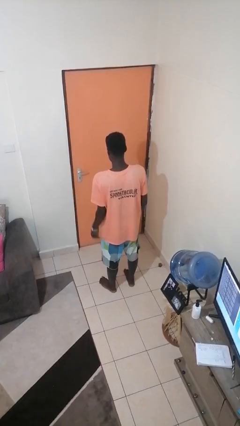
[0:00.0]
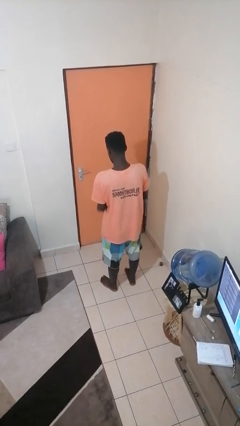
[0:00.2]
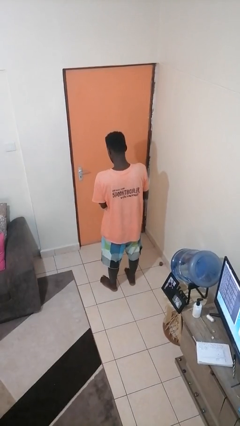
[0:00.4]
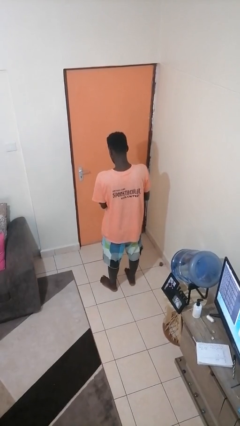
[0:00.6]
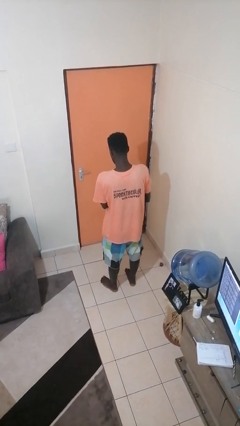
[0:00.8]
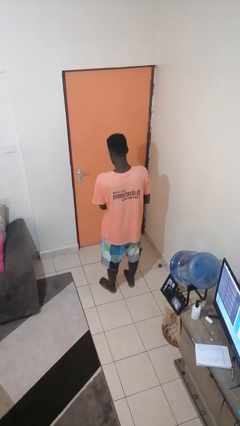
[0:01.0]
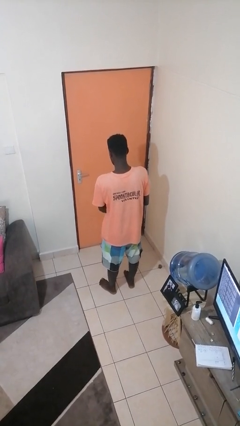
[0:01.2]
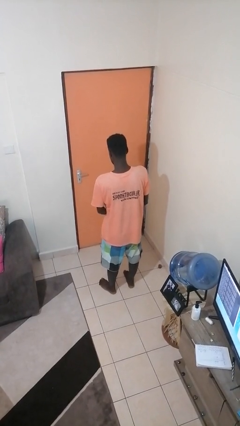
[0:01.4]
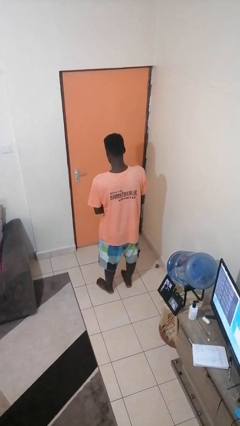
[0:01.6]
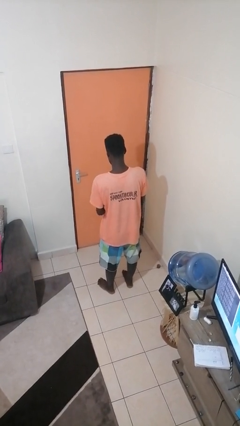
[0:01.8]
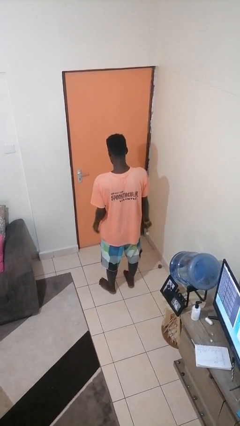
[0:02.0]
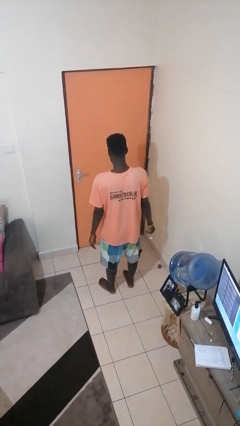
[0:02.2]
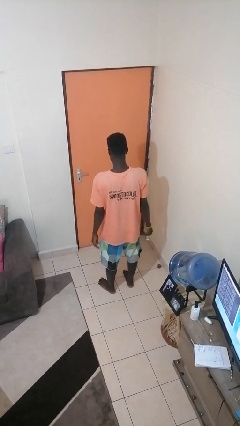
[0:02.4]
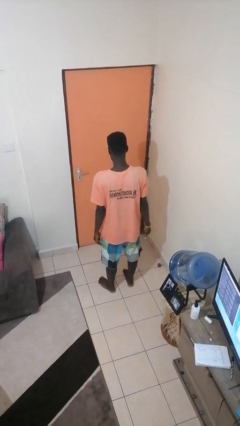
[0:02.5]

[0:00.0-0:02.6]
person takes off wristwatch

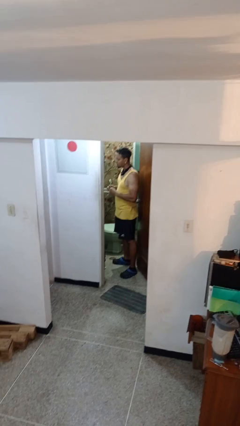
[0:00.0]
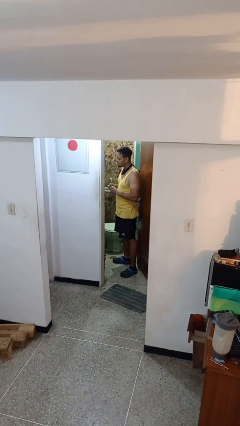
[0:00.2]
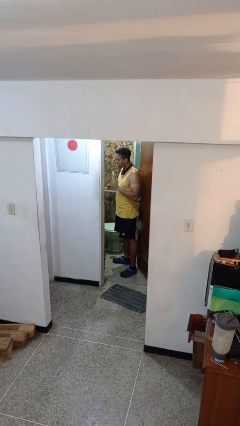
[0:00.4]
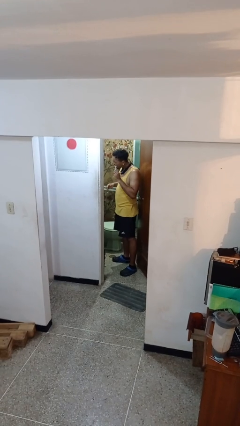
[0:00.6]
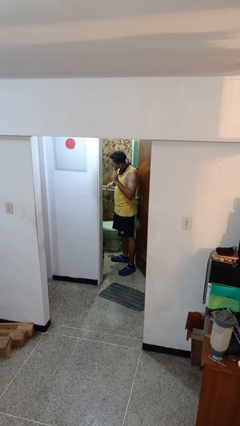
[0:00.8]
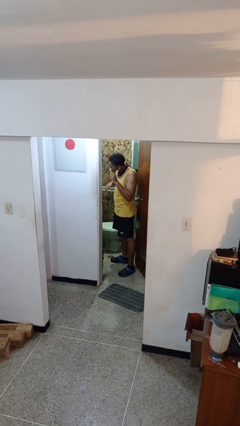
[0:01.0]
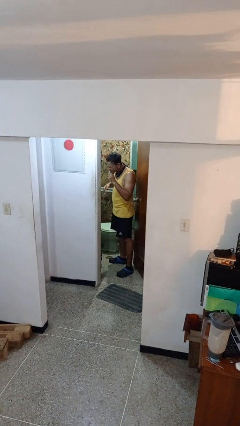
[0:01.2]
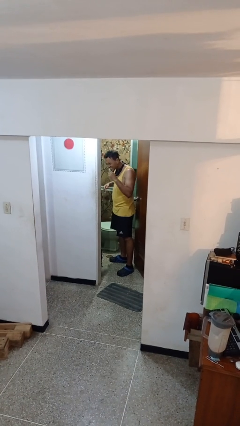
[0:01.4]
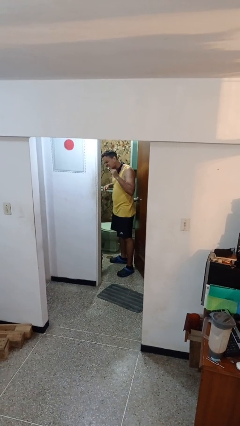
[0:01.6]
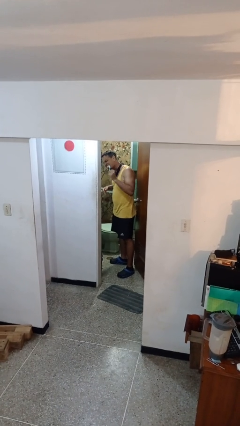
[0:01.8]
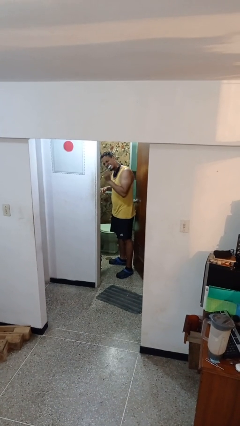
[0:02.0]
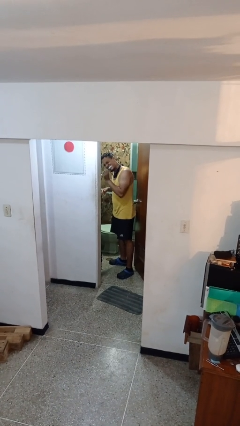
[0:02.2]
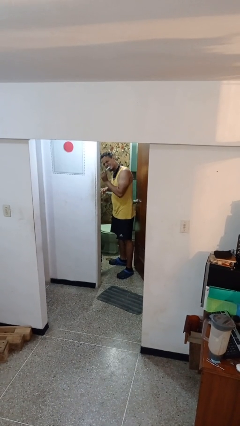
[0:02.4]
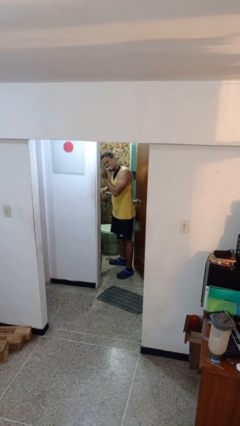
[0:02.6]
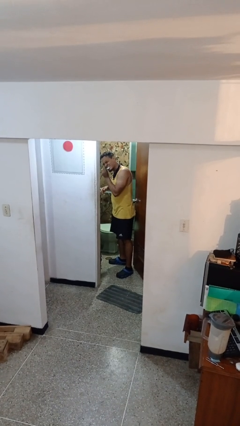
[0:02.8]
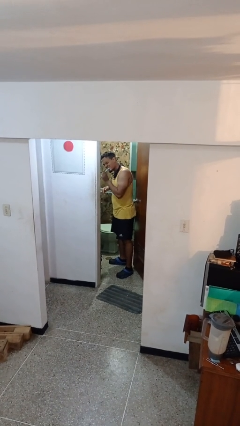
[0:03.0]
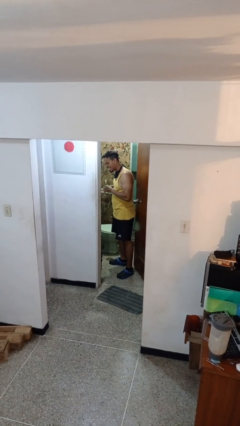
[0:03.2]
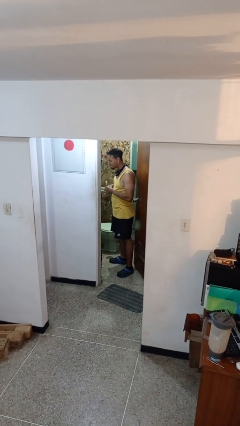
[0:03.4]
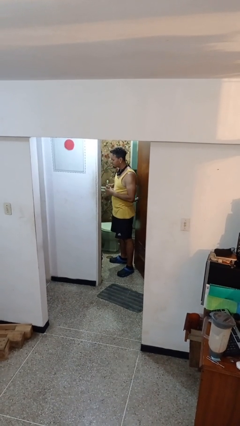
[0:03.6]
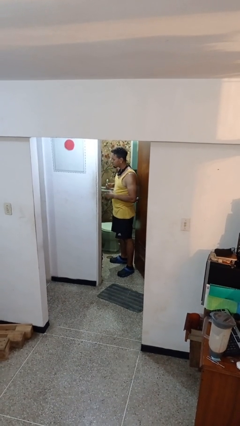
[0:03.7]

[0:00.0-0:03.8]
person brushes teeth

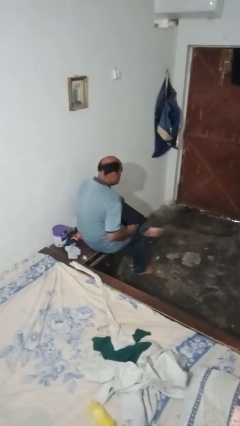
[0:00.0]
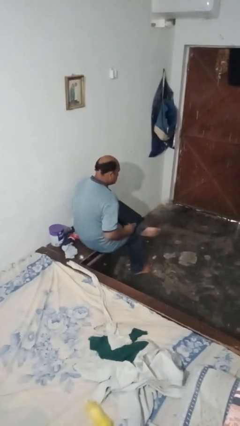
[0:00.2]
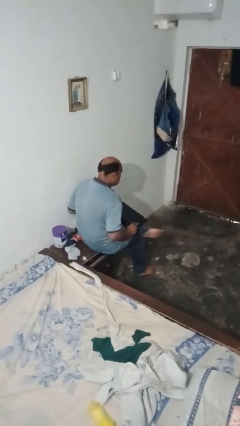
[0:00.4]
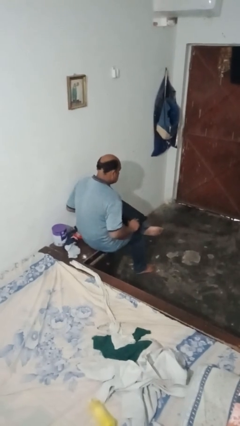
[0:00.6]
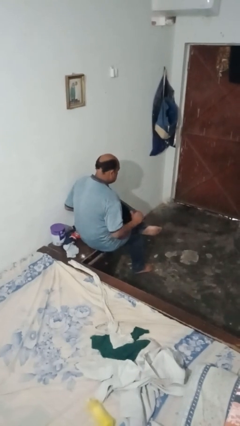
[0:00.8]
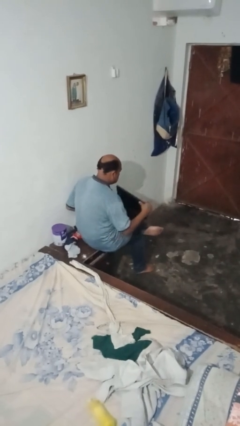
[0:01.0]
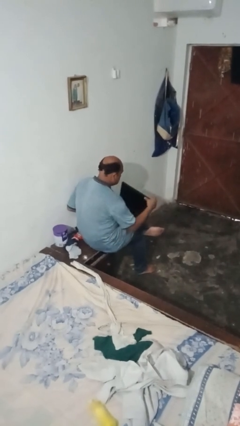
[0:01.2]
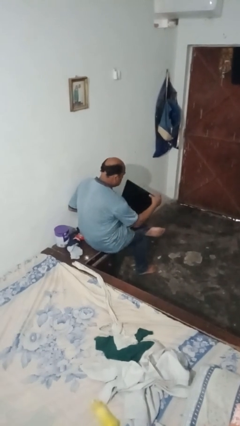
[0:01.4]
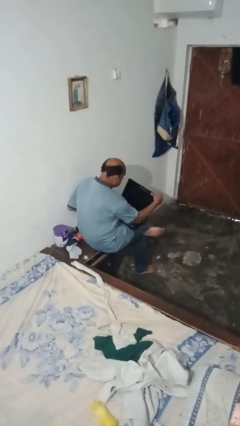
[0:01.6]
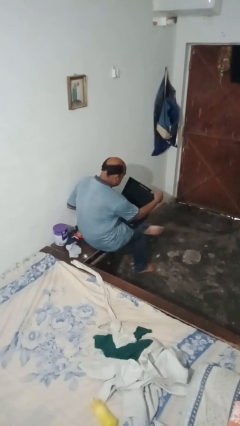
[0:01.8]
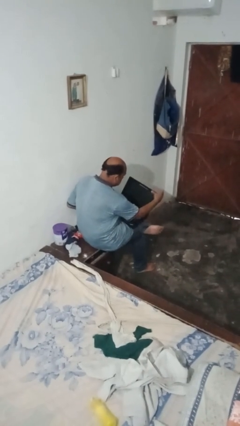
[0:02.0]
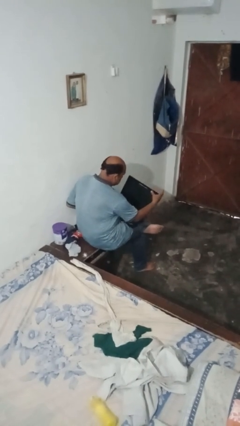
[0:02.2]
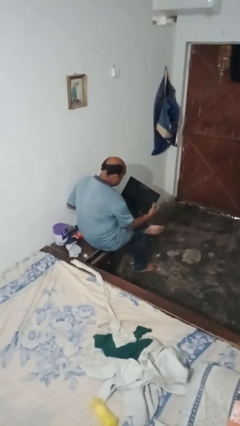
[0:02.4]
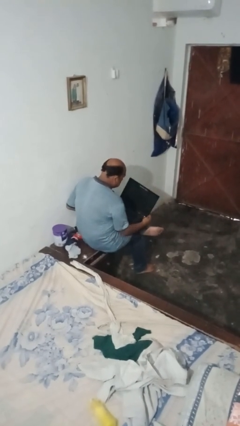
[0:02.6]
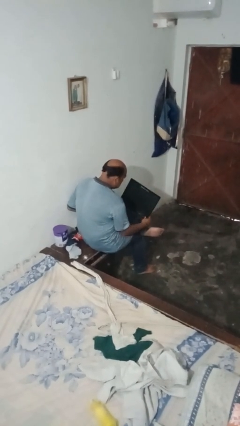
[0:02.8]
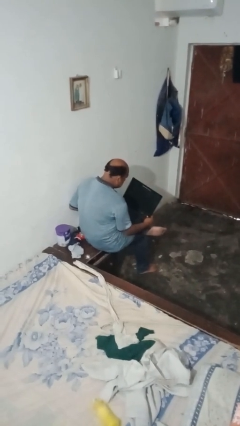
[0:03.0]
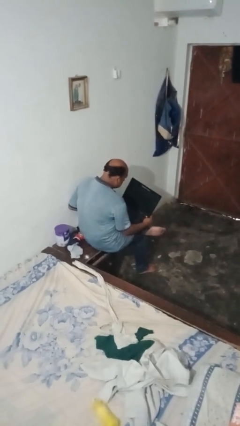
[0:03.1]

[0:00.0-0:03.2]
person opens laptop

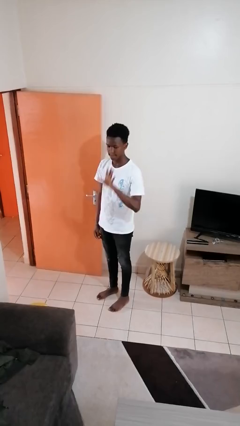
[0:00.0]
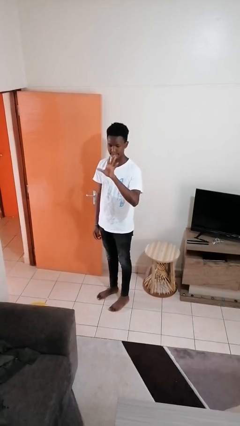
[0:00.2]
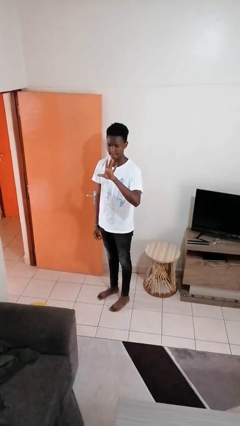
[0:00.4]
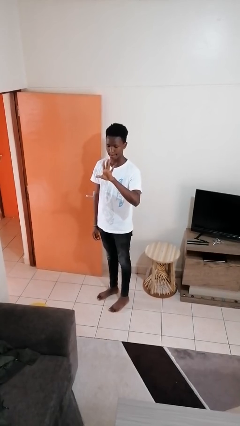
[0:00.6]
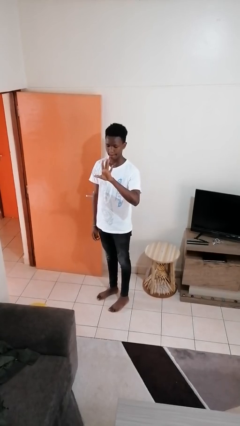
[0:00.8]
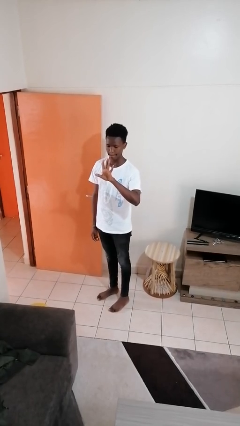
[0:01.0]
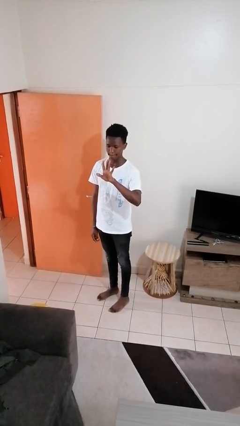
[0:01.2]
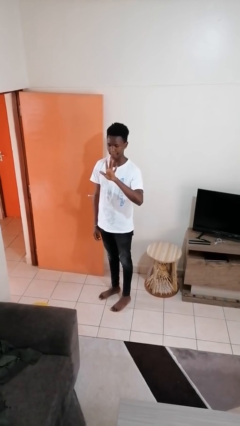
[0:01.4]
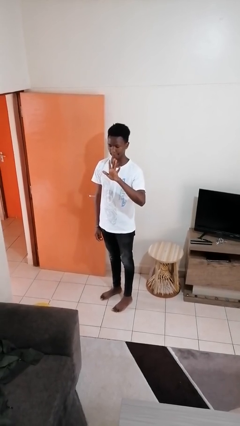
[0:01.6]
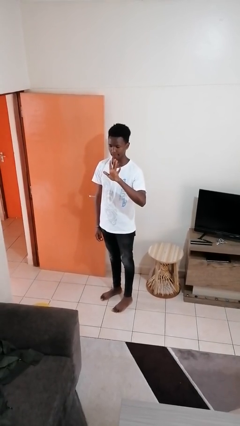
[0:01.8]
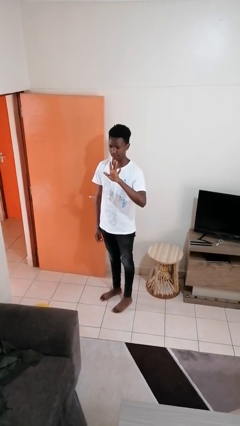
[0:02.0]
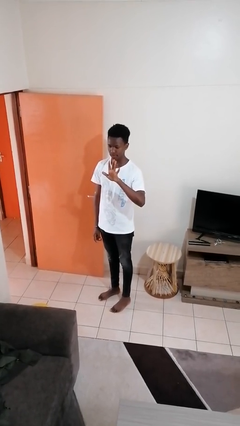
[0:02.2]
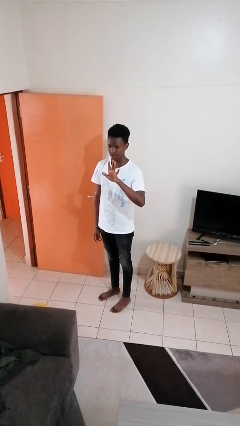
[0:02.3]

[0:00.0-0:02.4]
person gestures number five

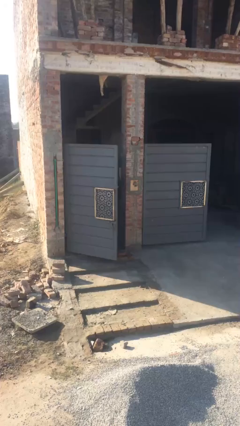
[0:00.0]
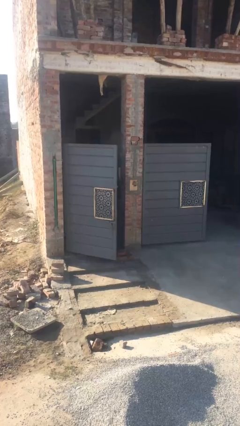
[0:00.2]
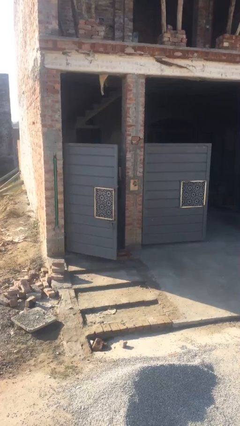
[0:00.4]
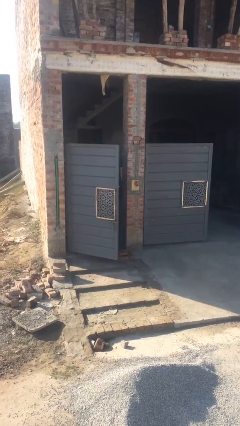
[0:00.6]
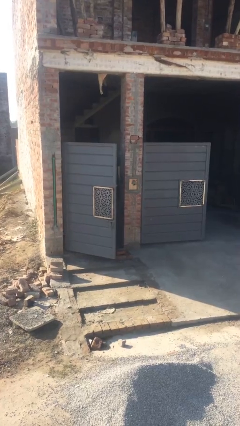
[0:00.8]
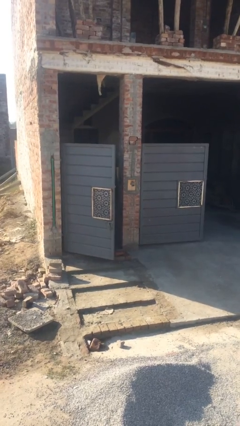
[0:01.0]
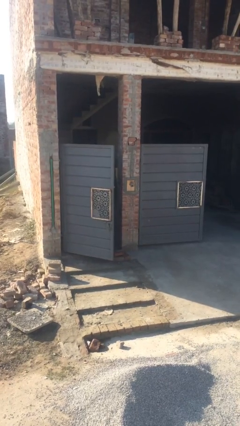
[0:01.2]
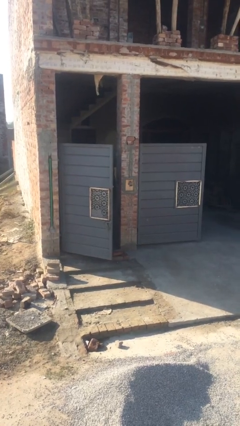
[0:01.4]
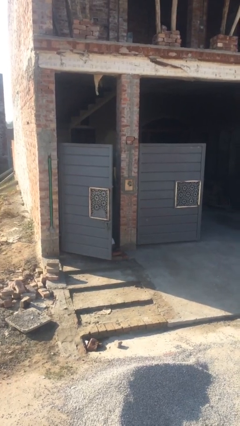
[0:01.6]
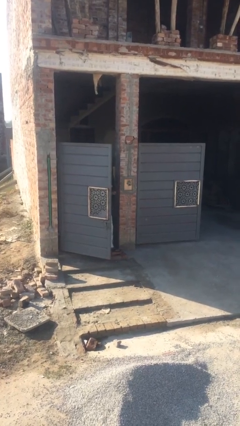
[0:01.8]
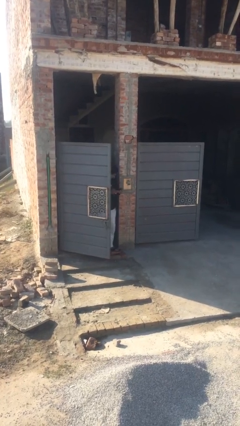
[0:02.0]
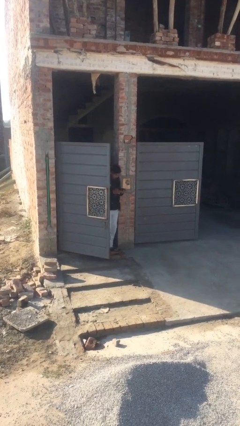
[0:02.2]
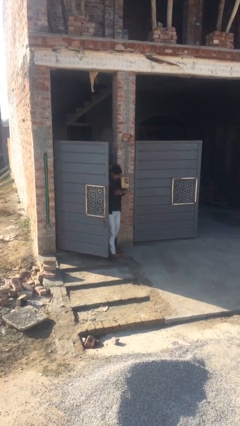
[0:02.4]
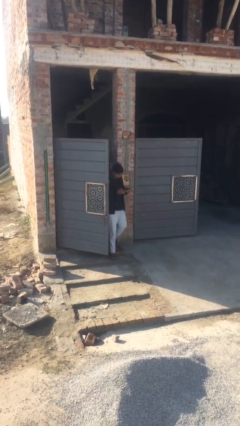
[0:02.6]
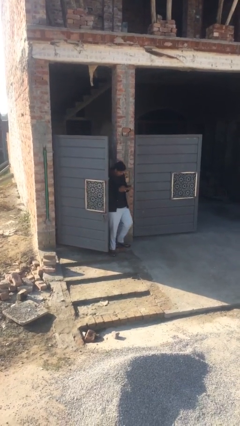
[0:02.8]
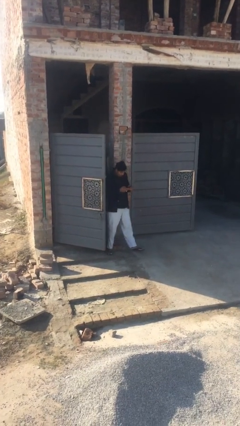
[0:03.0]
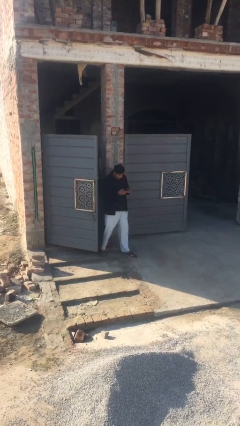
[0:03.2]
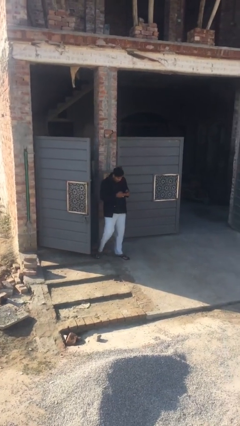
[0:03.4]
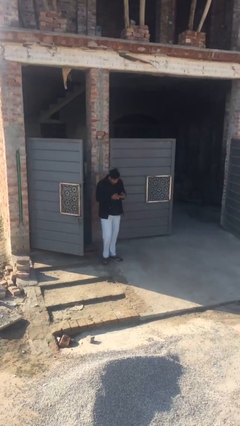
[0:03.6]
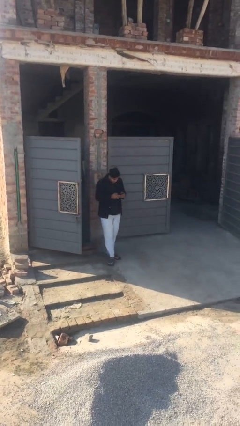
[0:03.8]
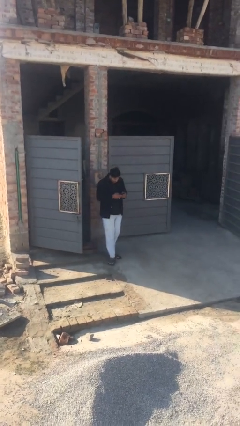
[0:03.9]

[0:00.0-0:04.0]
person enters scene through structure

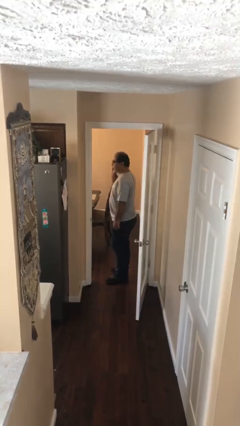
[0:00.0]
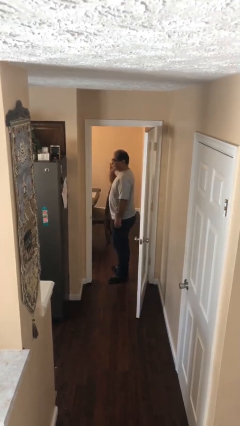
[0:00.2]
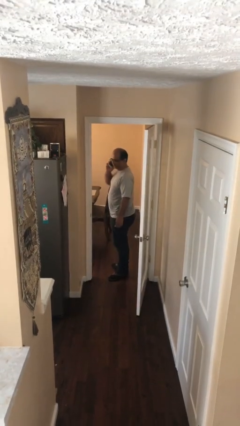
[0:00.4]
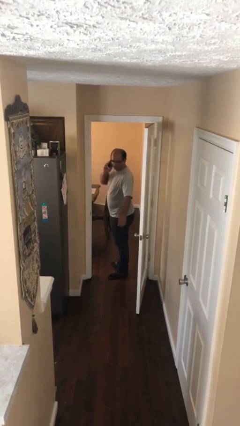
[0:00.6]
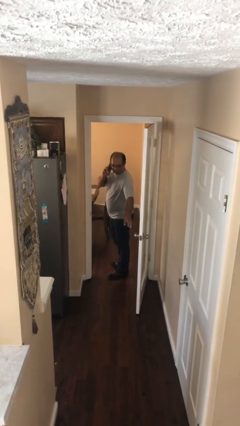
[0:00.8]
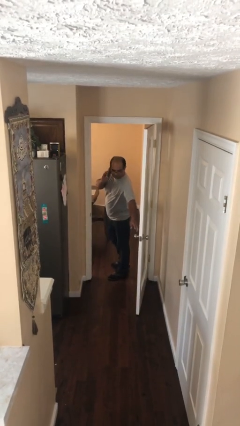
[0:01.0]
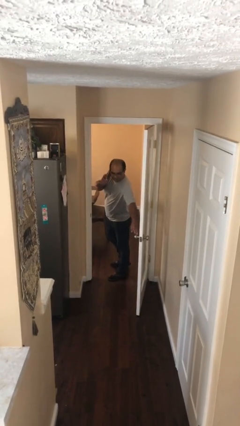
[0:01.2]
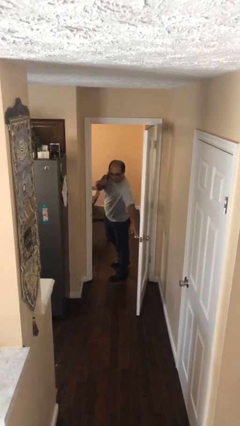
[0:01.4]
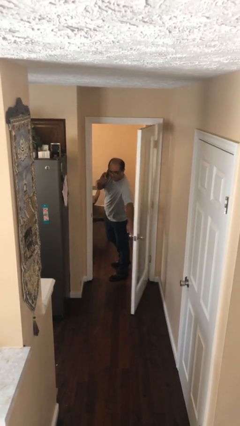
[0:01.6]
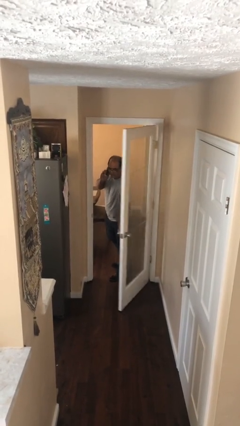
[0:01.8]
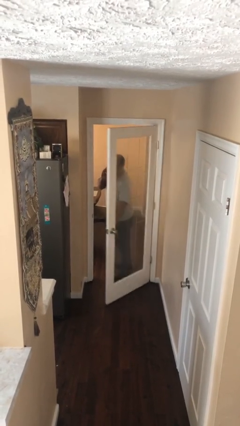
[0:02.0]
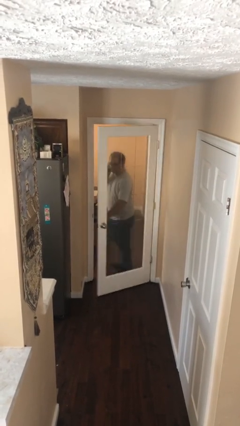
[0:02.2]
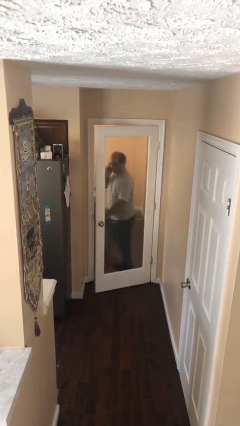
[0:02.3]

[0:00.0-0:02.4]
person closes facility door
